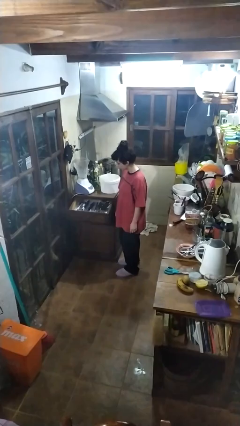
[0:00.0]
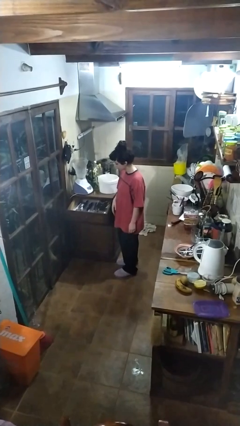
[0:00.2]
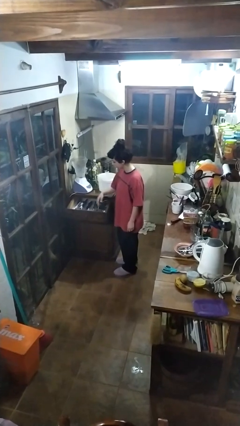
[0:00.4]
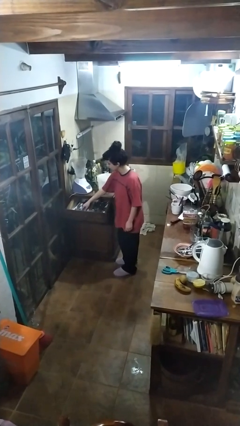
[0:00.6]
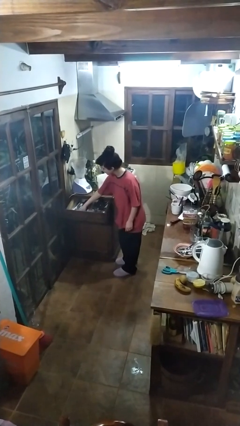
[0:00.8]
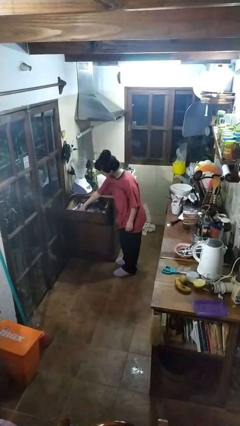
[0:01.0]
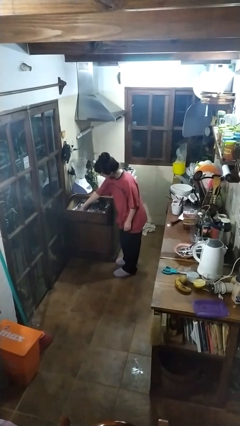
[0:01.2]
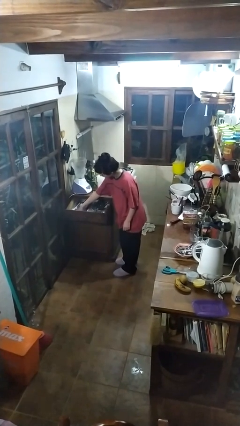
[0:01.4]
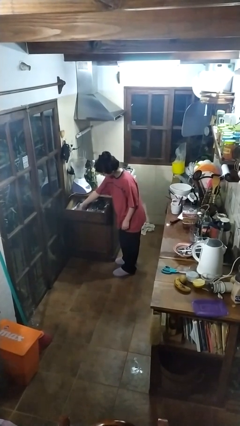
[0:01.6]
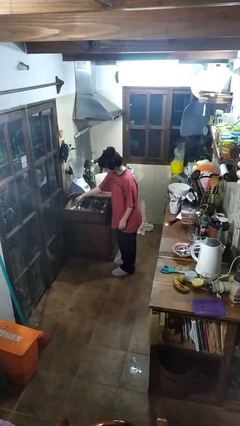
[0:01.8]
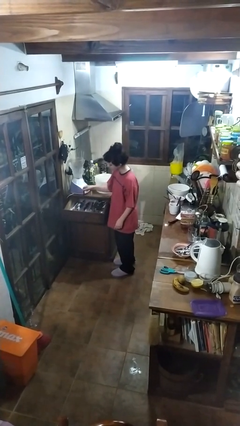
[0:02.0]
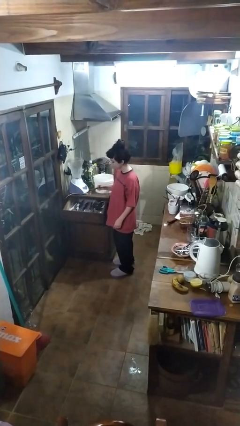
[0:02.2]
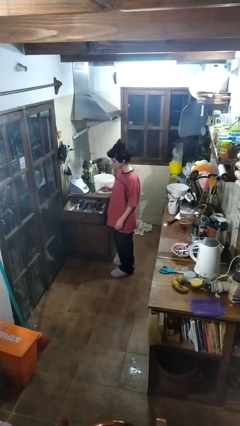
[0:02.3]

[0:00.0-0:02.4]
person takes object from kitchen drawer

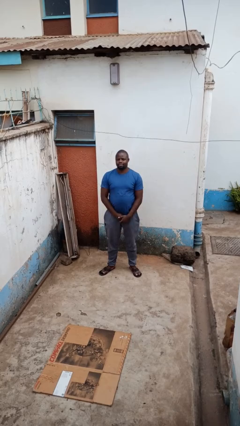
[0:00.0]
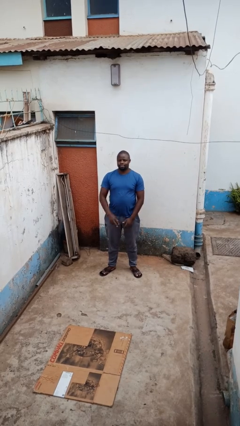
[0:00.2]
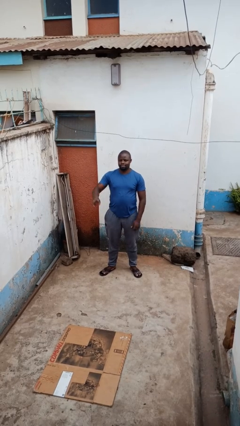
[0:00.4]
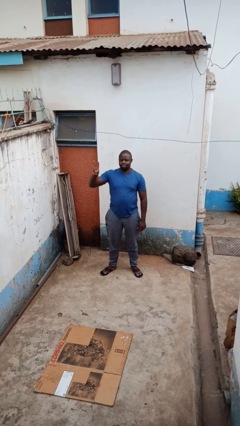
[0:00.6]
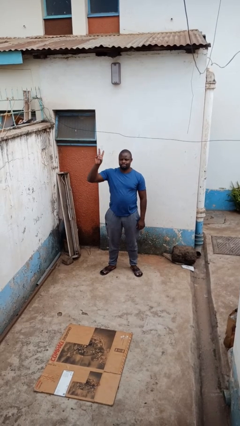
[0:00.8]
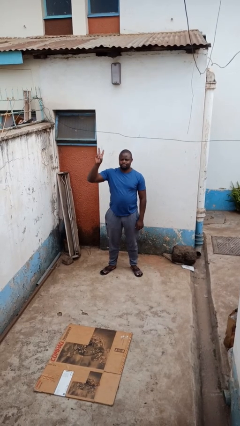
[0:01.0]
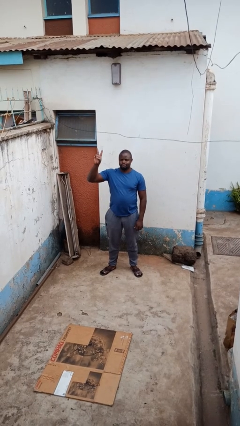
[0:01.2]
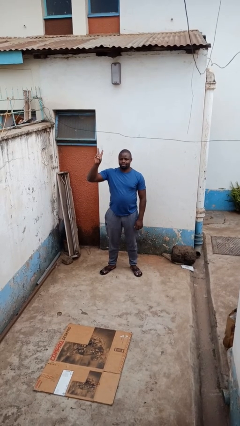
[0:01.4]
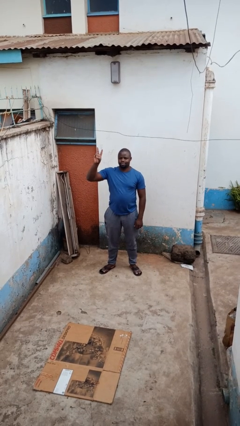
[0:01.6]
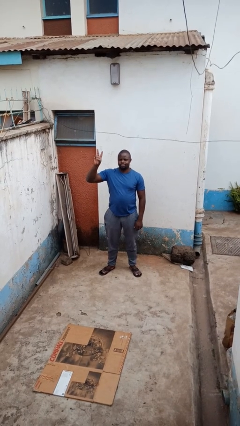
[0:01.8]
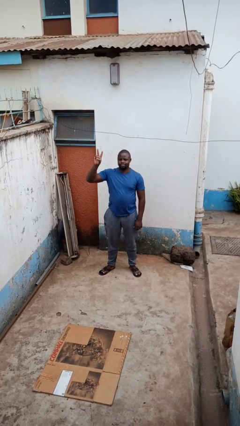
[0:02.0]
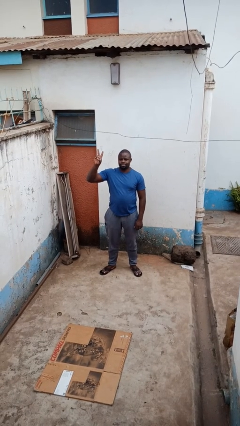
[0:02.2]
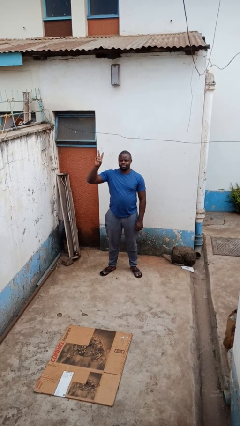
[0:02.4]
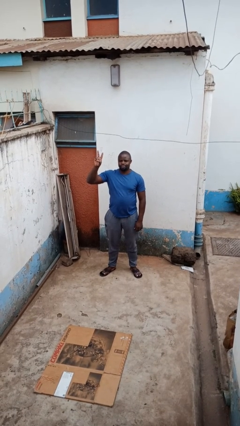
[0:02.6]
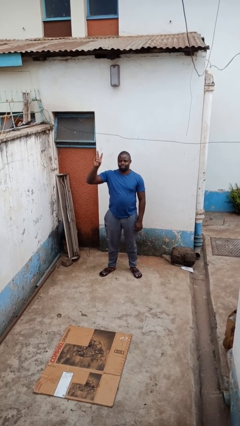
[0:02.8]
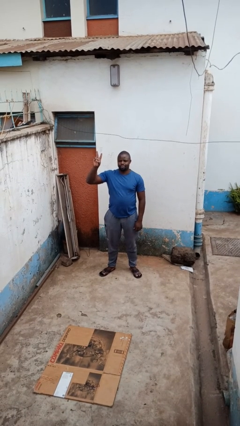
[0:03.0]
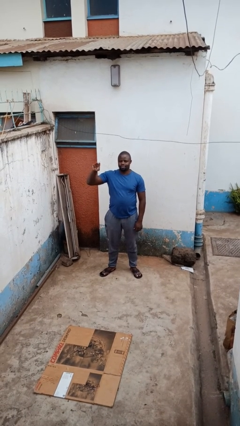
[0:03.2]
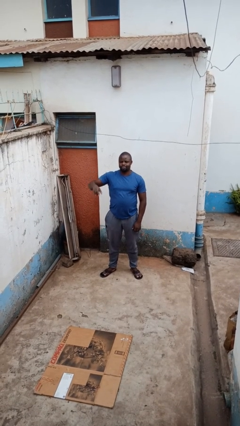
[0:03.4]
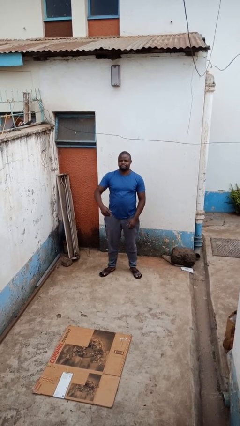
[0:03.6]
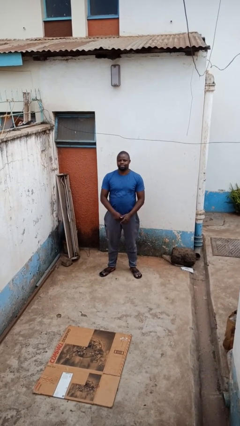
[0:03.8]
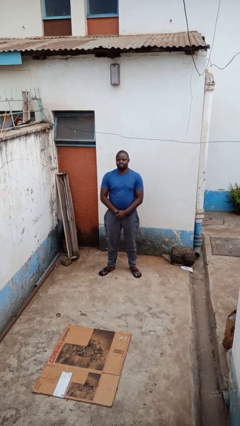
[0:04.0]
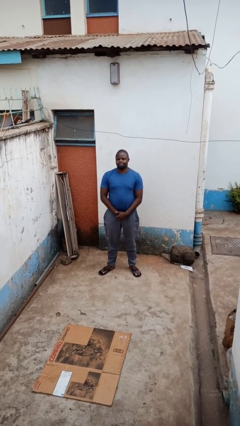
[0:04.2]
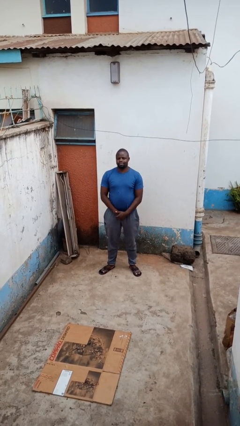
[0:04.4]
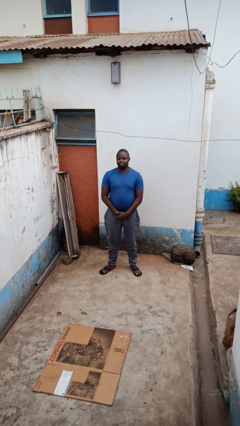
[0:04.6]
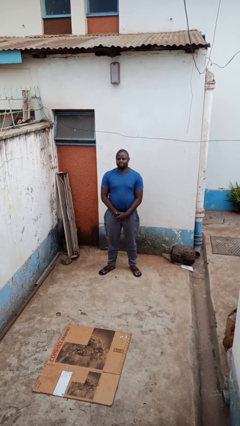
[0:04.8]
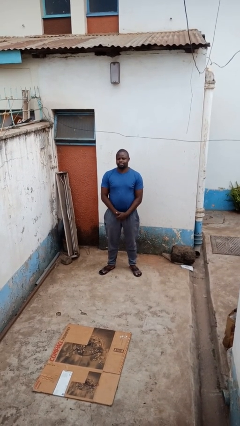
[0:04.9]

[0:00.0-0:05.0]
person gestures peace

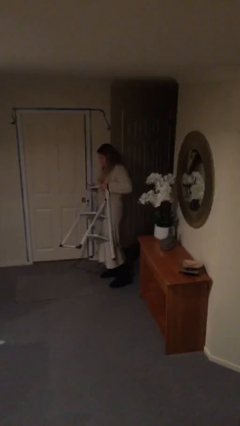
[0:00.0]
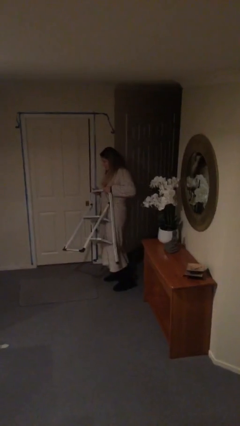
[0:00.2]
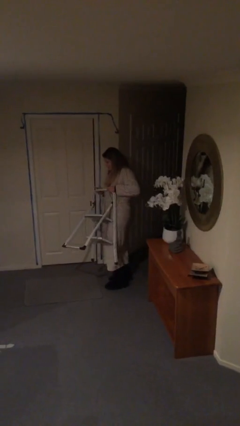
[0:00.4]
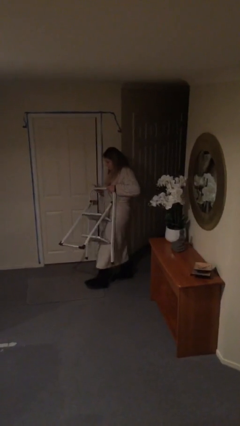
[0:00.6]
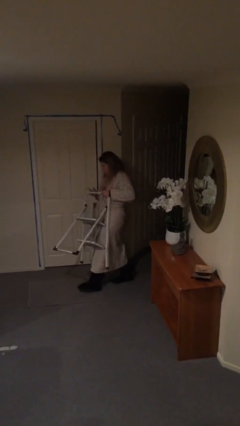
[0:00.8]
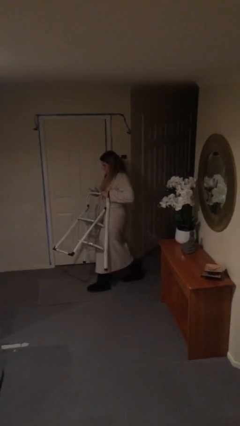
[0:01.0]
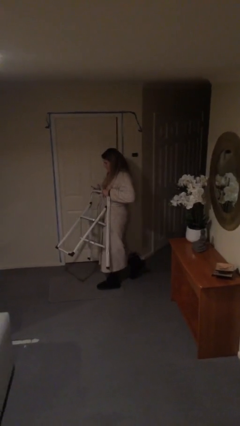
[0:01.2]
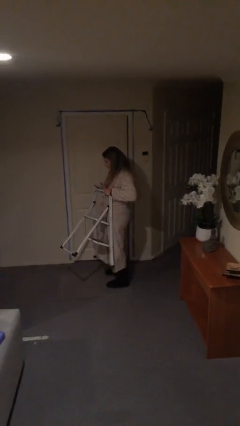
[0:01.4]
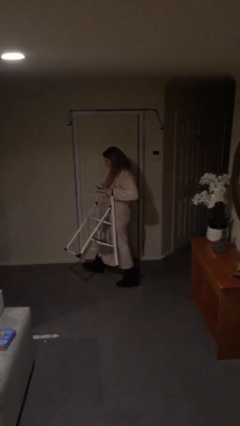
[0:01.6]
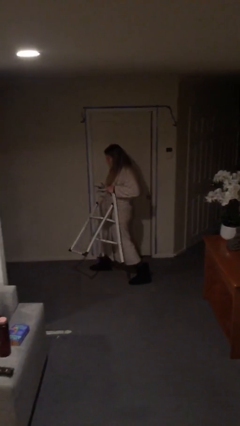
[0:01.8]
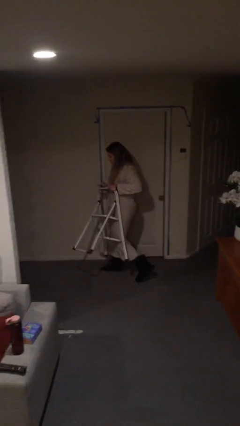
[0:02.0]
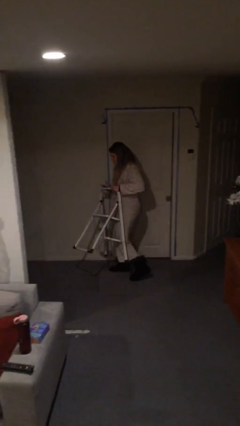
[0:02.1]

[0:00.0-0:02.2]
person carries heavy object

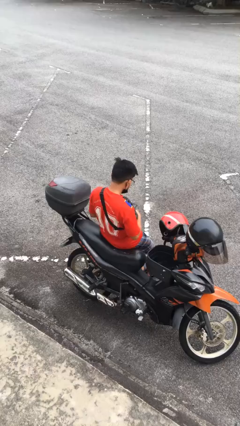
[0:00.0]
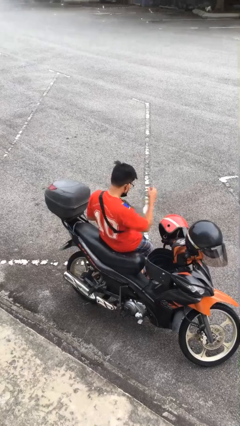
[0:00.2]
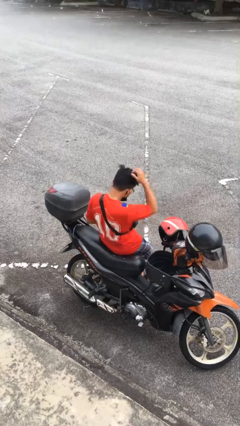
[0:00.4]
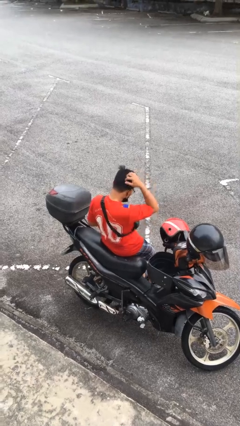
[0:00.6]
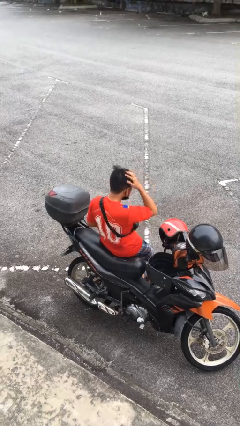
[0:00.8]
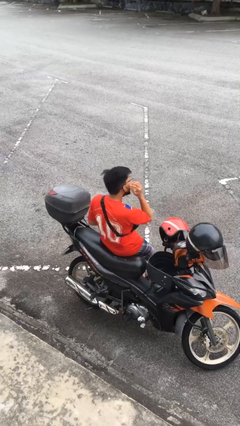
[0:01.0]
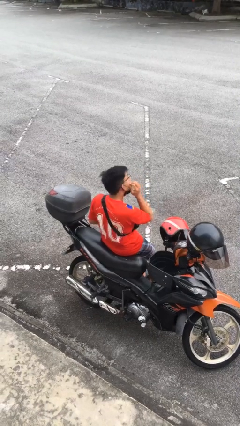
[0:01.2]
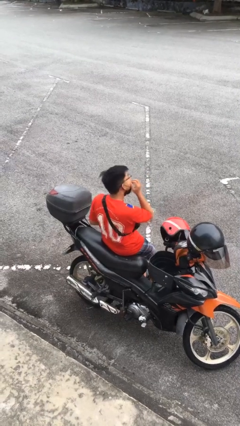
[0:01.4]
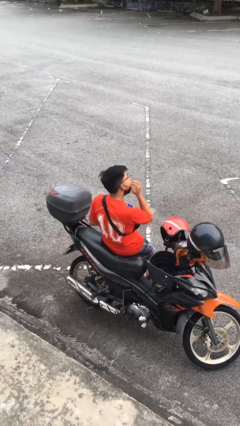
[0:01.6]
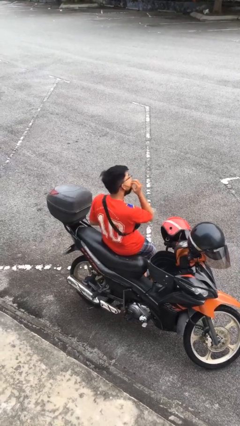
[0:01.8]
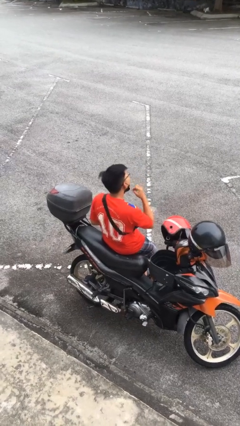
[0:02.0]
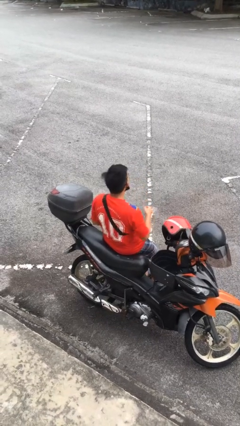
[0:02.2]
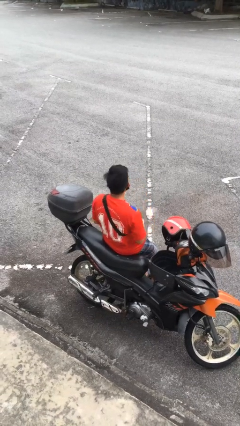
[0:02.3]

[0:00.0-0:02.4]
person scratches face

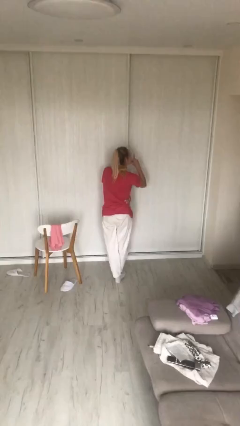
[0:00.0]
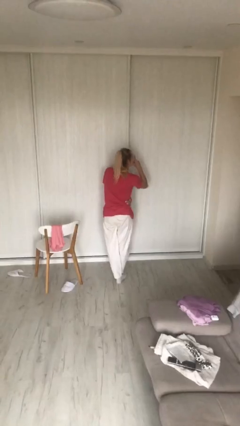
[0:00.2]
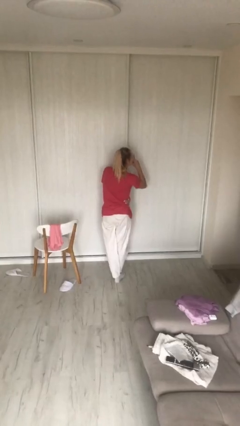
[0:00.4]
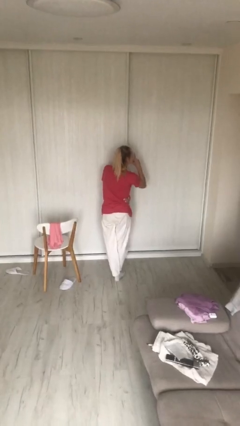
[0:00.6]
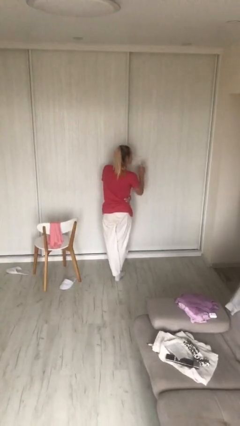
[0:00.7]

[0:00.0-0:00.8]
person gestures be quiet

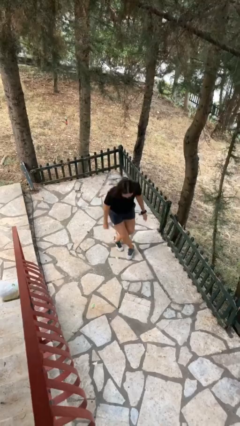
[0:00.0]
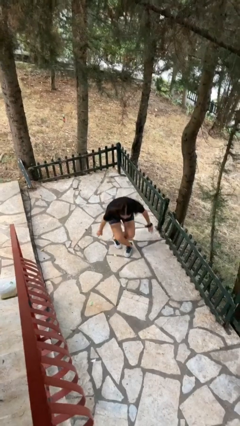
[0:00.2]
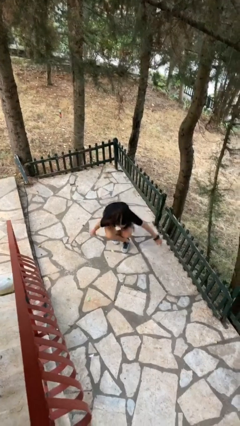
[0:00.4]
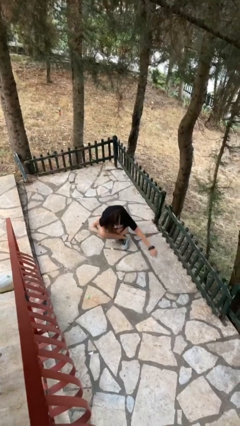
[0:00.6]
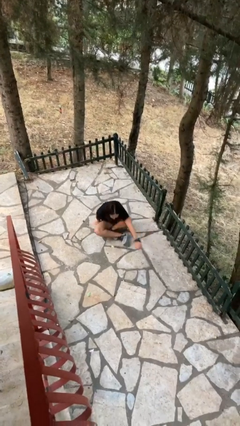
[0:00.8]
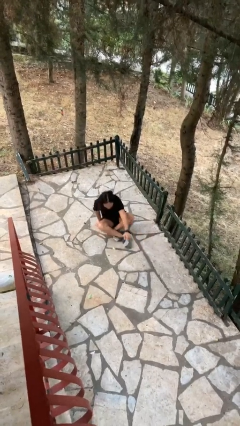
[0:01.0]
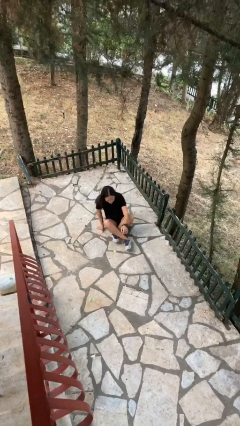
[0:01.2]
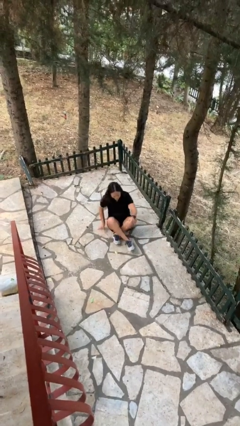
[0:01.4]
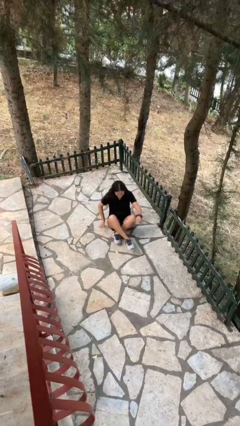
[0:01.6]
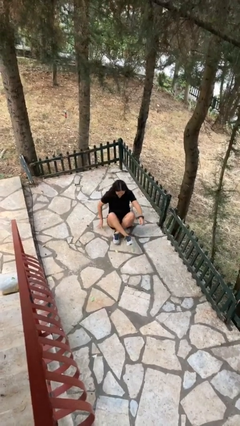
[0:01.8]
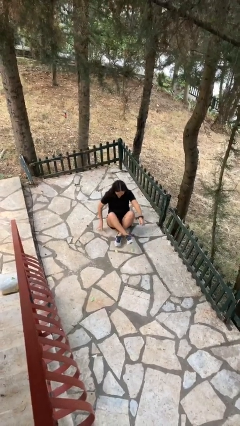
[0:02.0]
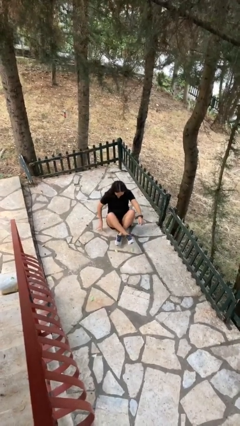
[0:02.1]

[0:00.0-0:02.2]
person sits crisscross

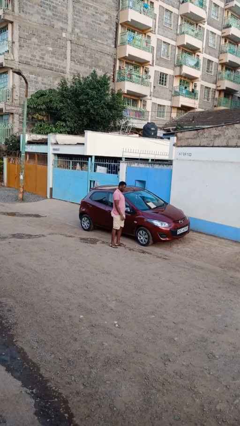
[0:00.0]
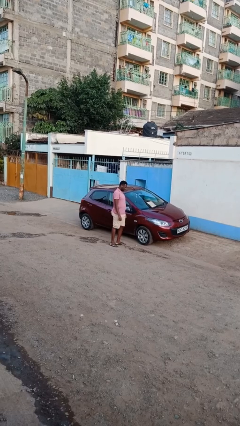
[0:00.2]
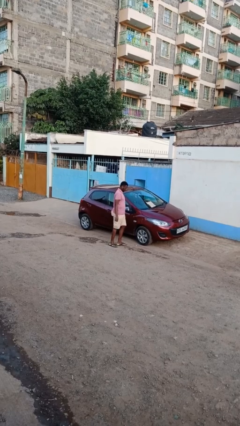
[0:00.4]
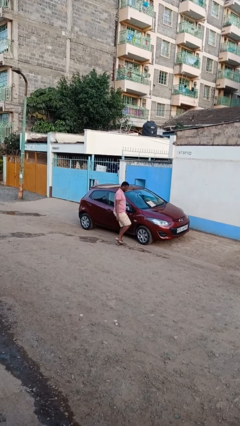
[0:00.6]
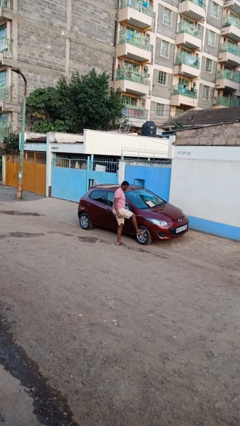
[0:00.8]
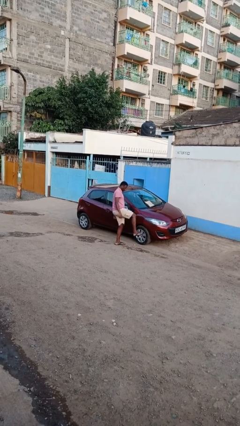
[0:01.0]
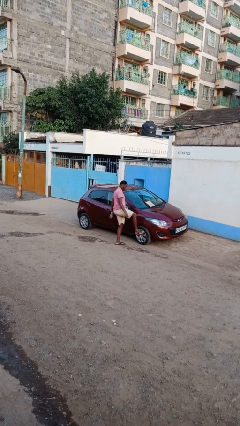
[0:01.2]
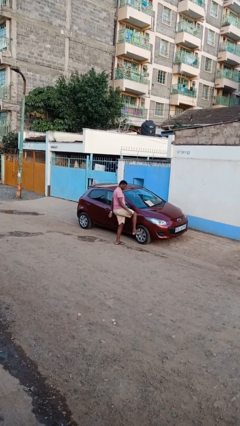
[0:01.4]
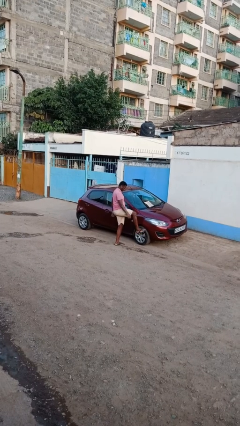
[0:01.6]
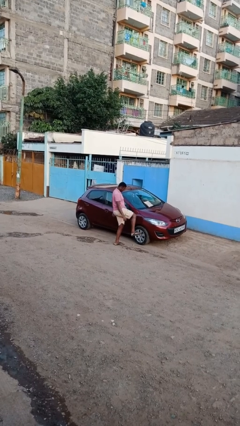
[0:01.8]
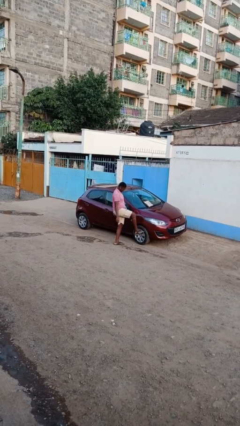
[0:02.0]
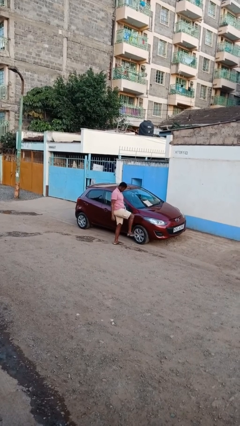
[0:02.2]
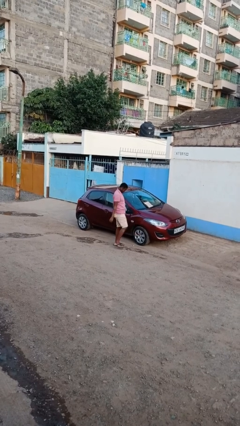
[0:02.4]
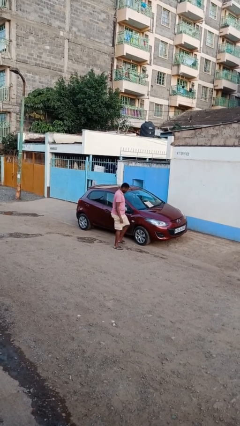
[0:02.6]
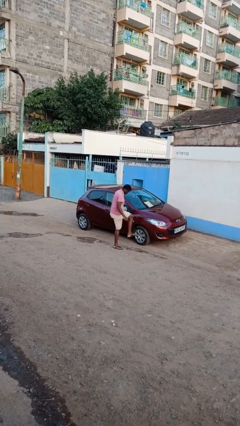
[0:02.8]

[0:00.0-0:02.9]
person kicks car tires
